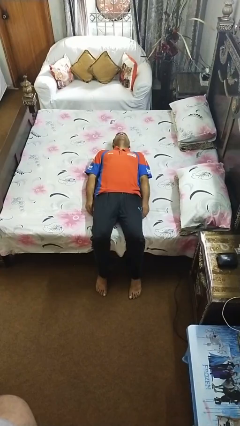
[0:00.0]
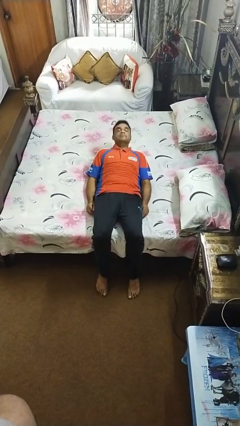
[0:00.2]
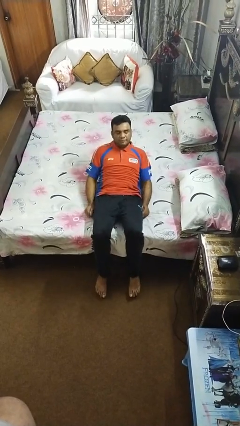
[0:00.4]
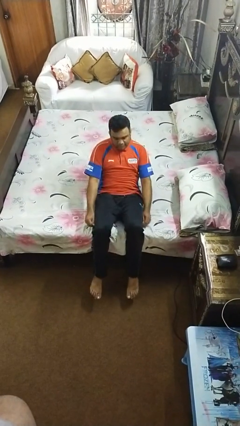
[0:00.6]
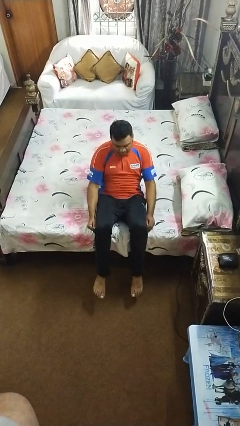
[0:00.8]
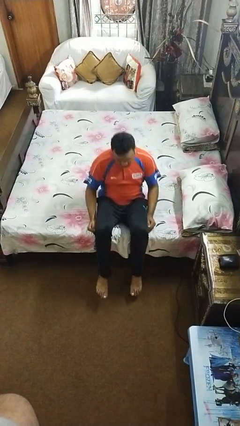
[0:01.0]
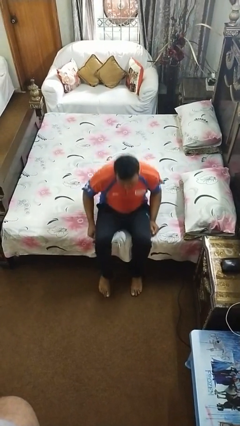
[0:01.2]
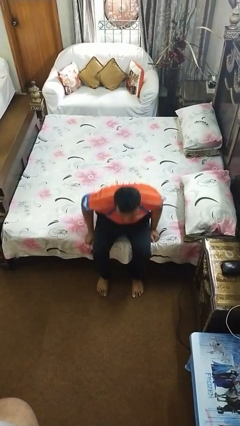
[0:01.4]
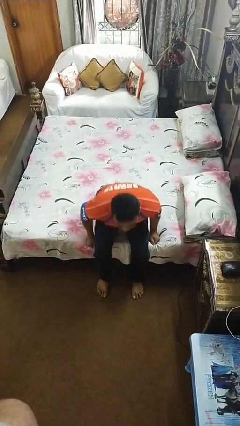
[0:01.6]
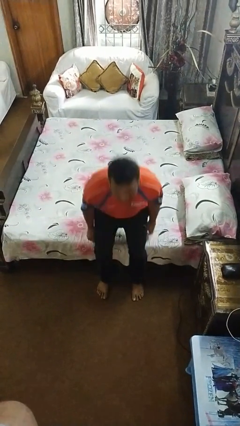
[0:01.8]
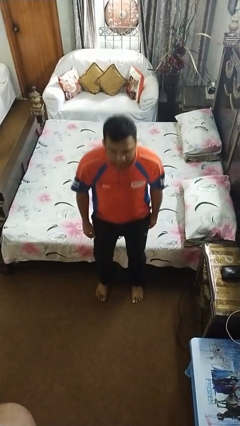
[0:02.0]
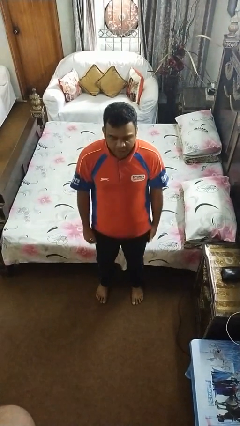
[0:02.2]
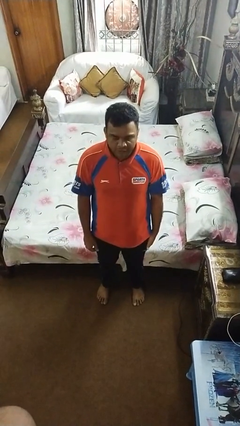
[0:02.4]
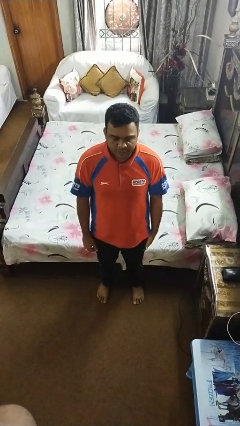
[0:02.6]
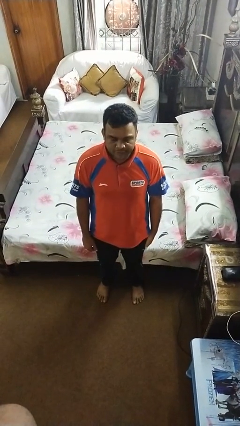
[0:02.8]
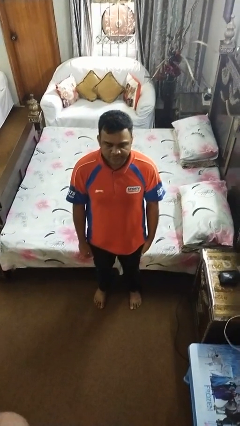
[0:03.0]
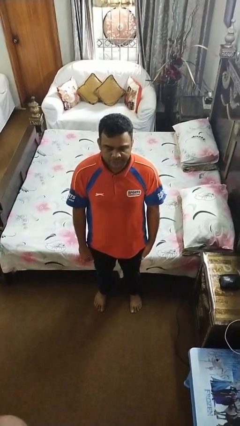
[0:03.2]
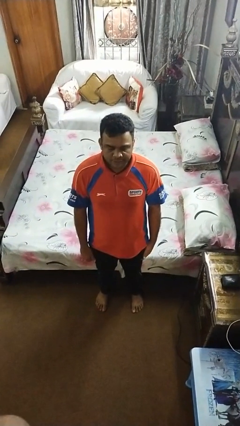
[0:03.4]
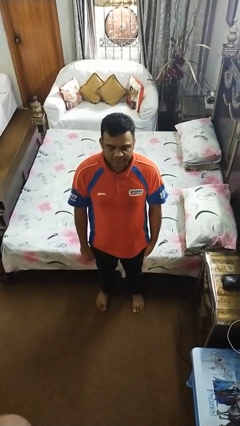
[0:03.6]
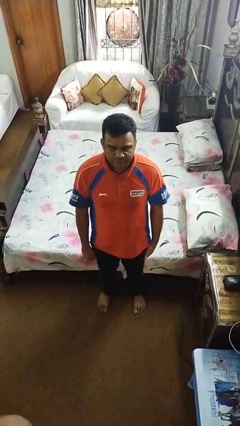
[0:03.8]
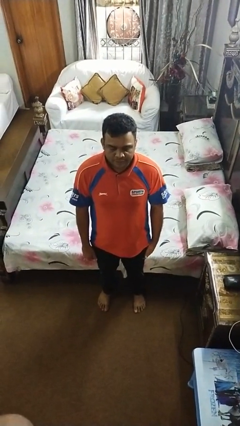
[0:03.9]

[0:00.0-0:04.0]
person stands up

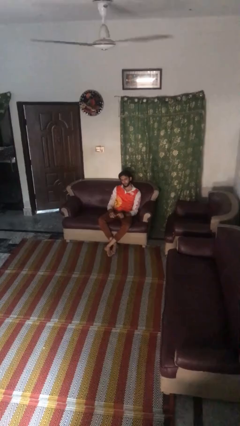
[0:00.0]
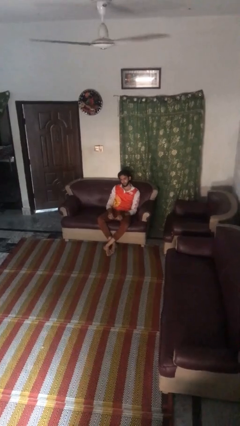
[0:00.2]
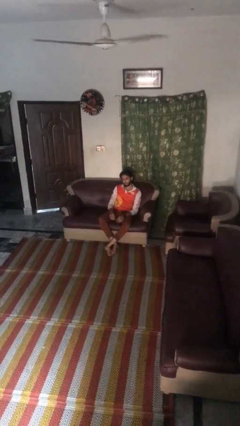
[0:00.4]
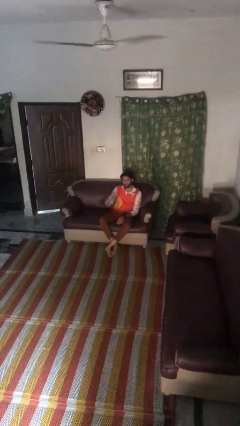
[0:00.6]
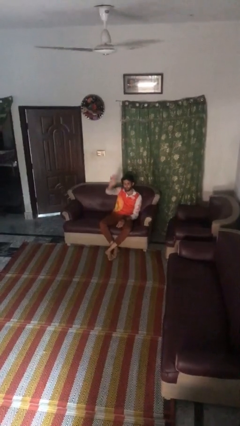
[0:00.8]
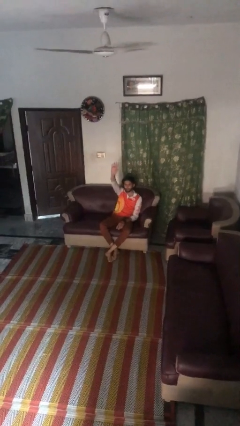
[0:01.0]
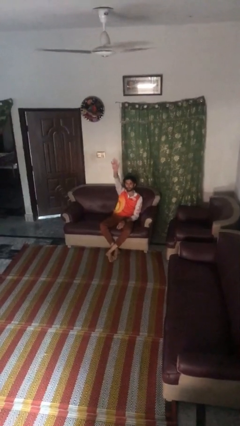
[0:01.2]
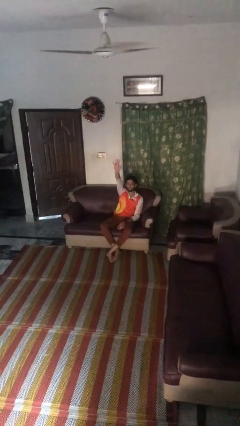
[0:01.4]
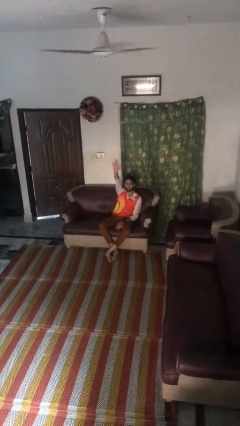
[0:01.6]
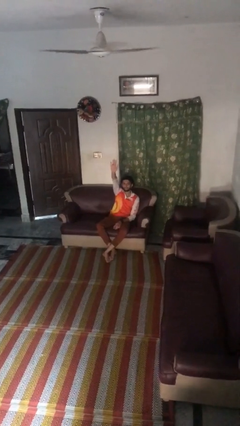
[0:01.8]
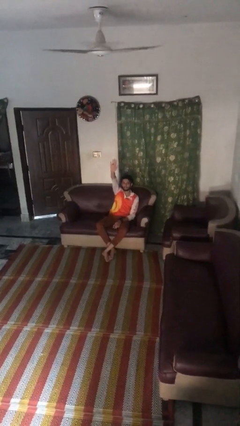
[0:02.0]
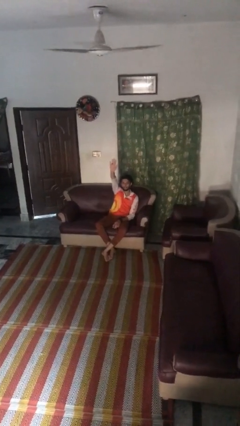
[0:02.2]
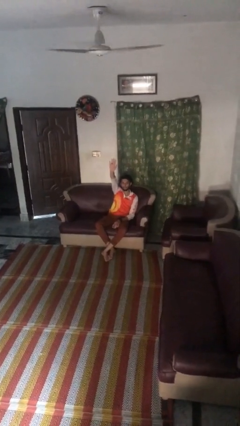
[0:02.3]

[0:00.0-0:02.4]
person gestures raise hand

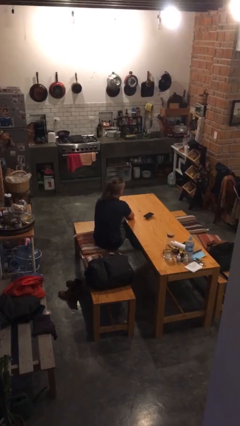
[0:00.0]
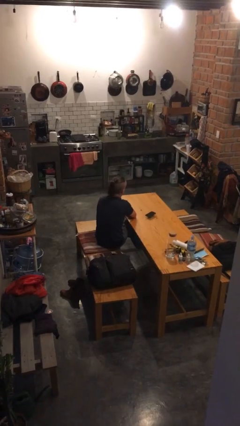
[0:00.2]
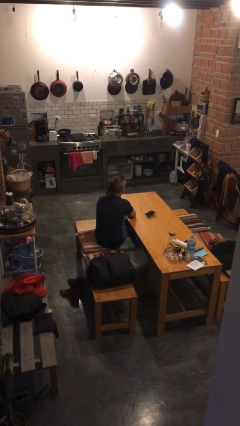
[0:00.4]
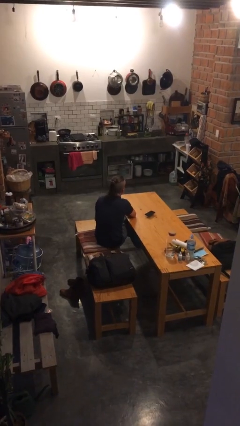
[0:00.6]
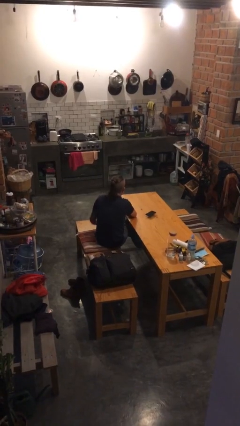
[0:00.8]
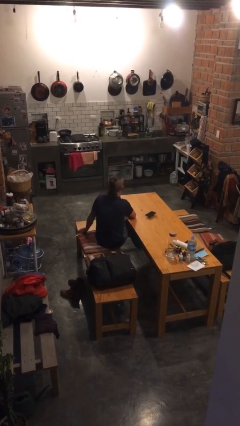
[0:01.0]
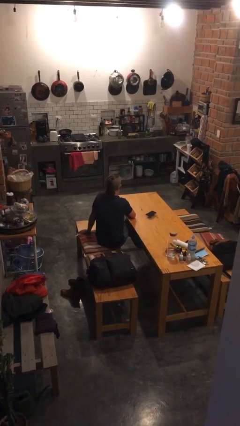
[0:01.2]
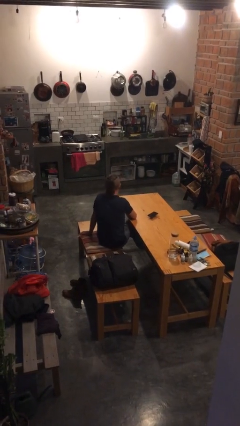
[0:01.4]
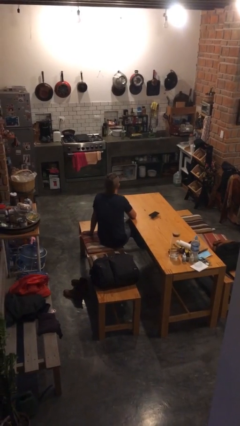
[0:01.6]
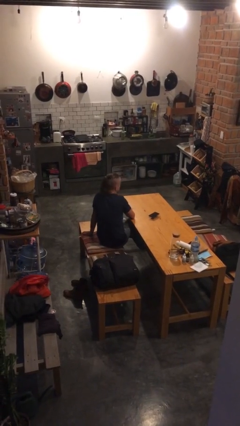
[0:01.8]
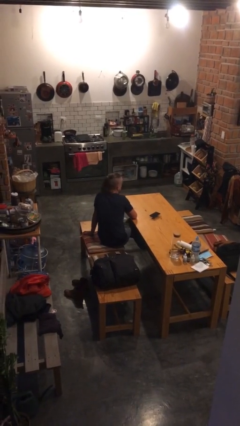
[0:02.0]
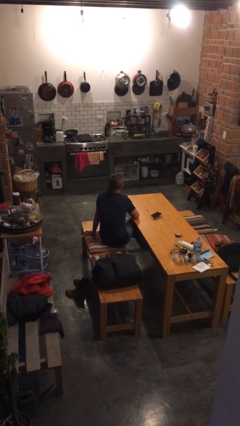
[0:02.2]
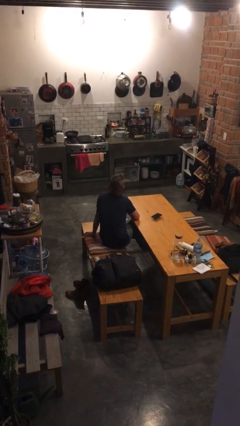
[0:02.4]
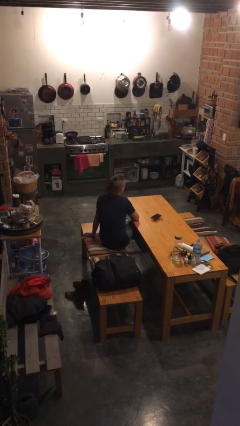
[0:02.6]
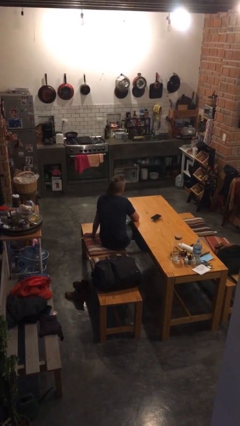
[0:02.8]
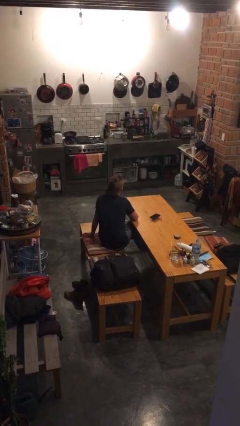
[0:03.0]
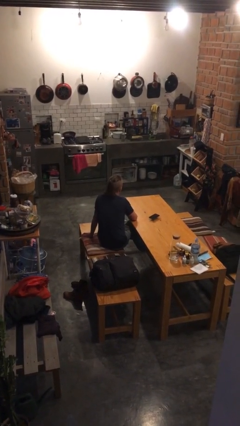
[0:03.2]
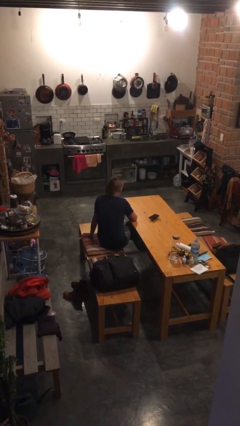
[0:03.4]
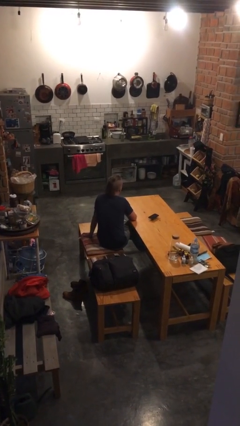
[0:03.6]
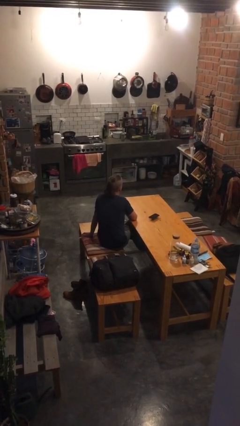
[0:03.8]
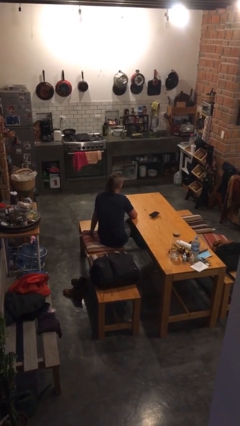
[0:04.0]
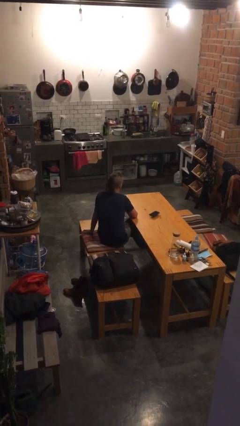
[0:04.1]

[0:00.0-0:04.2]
person nods head

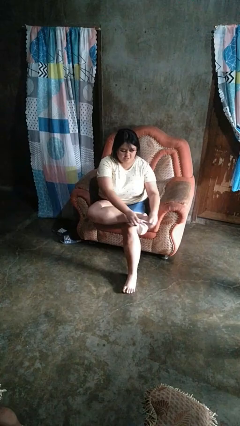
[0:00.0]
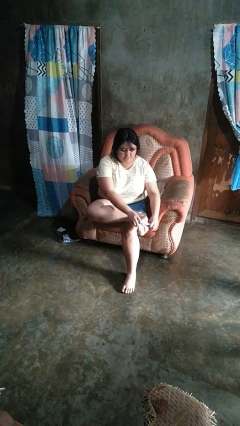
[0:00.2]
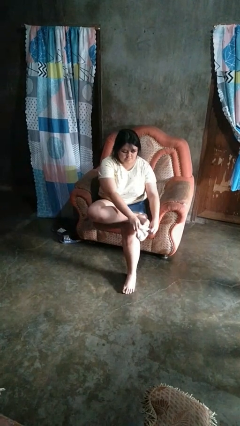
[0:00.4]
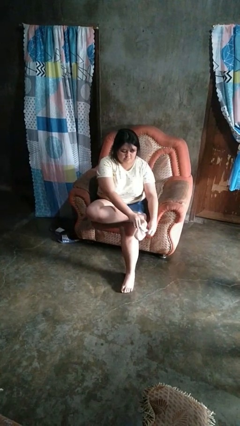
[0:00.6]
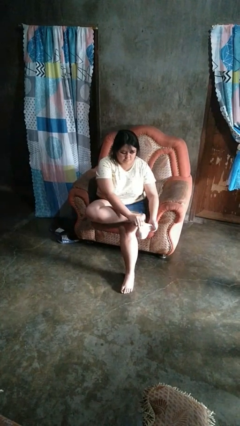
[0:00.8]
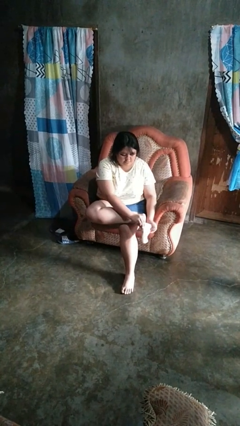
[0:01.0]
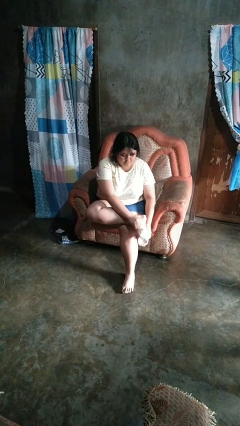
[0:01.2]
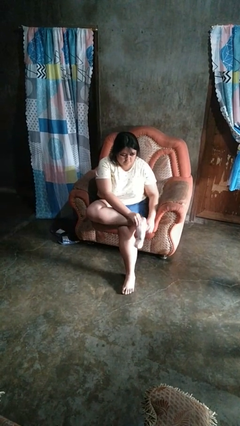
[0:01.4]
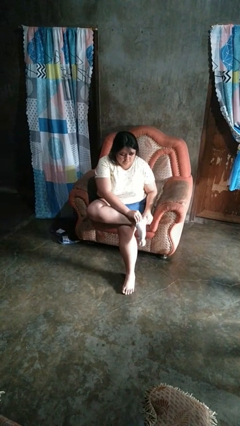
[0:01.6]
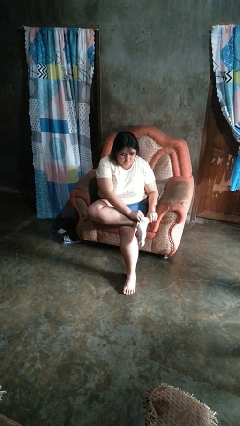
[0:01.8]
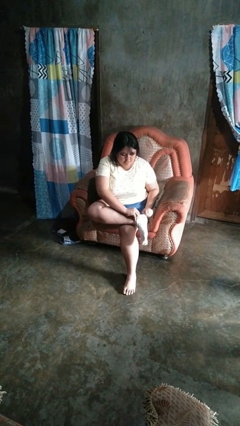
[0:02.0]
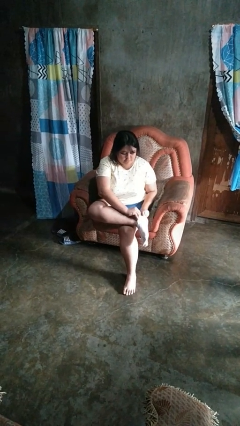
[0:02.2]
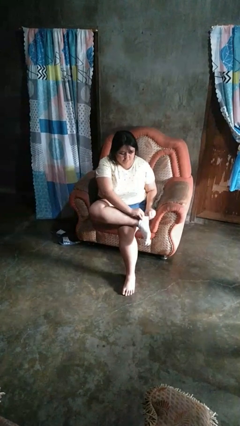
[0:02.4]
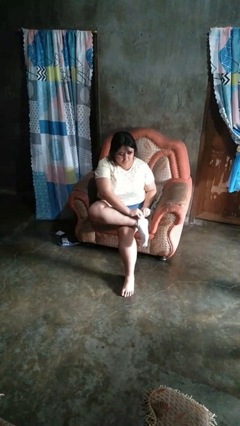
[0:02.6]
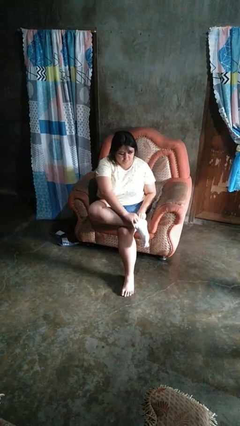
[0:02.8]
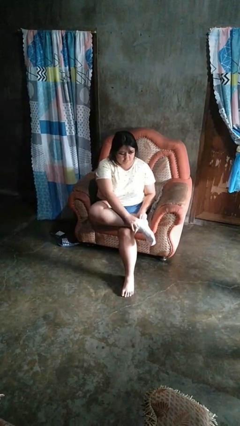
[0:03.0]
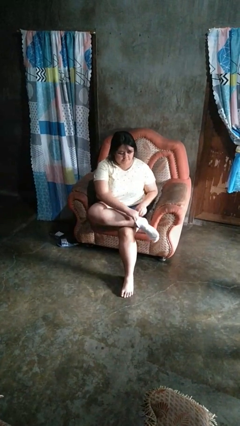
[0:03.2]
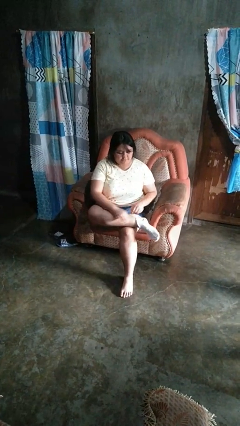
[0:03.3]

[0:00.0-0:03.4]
person puts on socks

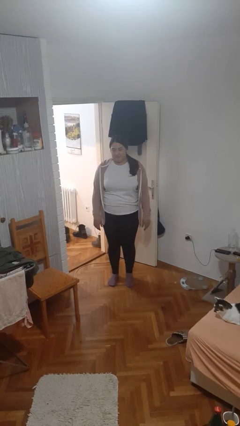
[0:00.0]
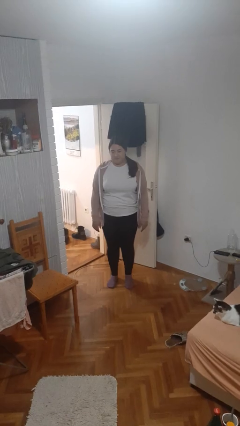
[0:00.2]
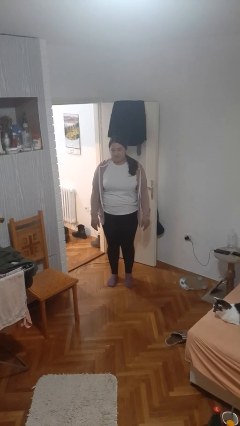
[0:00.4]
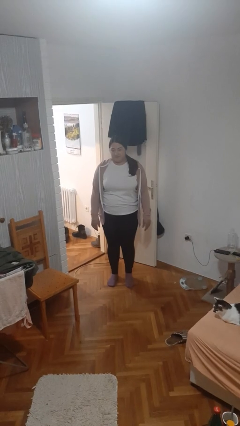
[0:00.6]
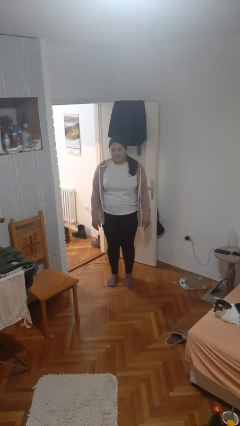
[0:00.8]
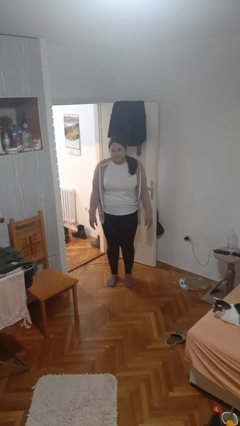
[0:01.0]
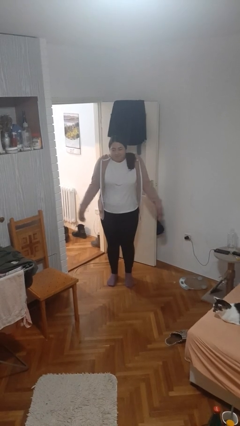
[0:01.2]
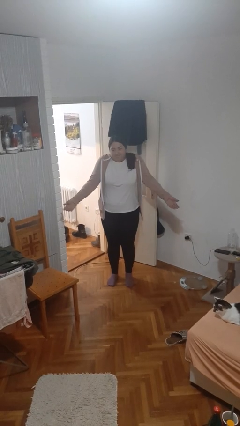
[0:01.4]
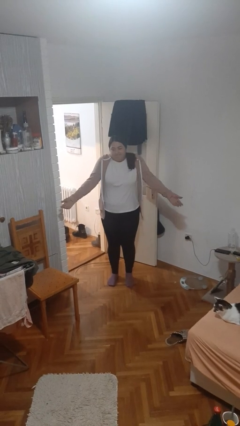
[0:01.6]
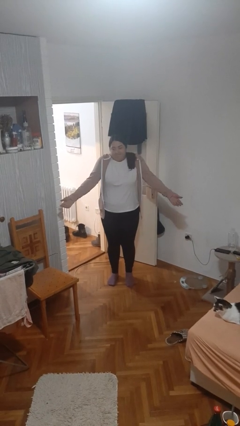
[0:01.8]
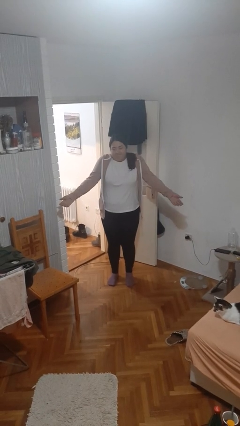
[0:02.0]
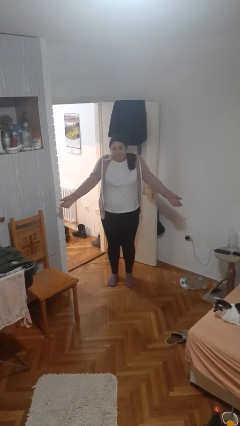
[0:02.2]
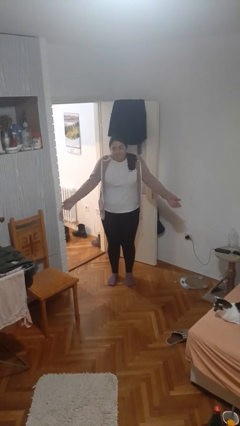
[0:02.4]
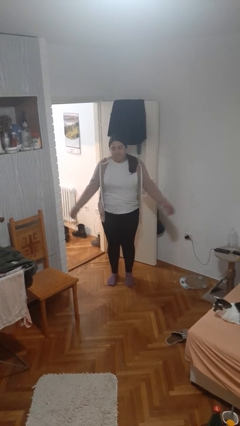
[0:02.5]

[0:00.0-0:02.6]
person shrugs

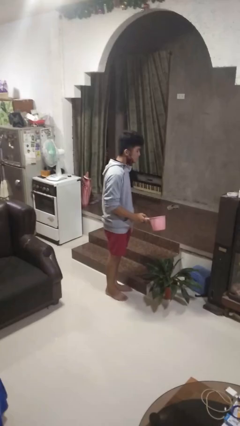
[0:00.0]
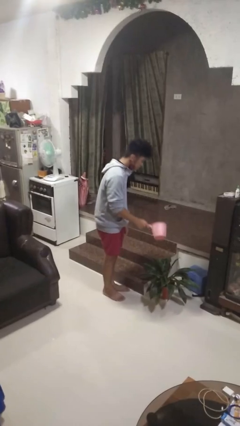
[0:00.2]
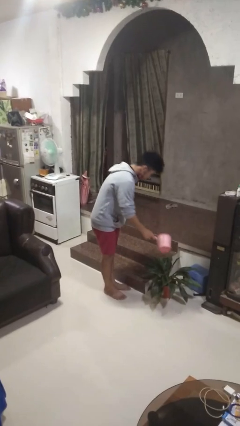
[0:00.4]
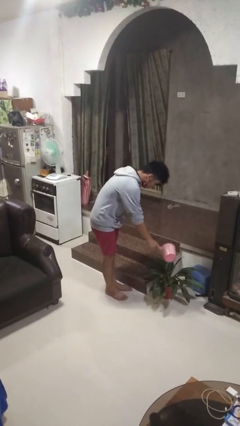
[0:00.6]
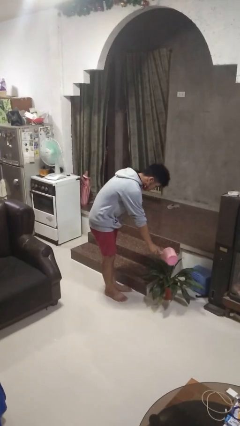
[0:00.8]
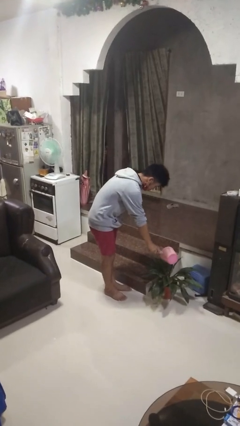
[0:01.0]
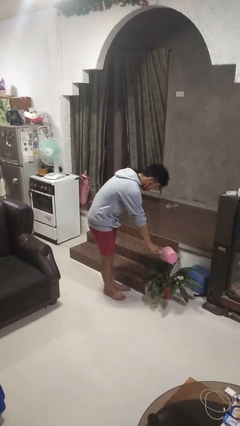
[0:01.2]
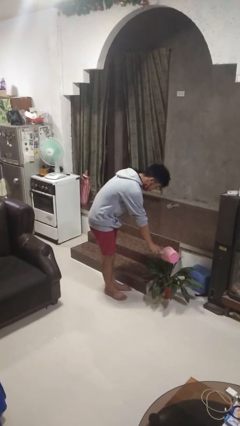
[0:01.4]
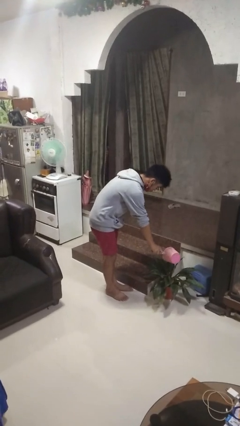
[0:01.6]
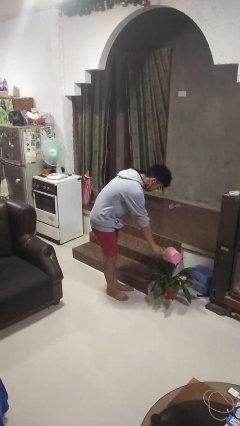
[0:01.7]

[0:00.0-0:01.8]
person waters houseplant
